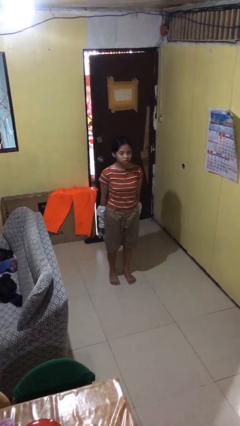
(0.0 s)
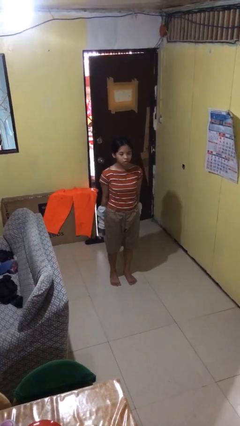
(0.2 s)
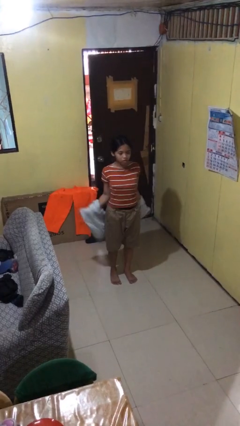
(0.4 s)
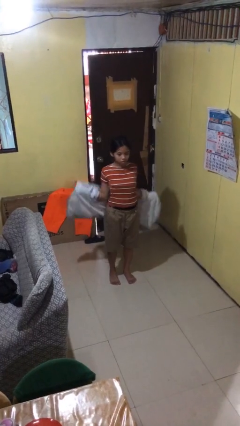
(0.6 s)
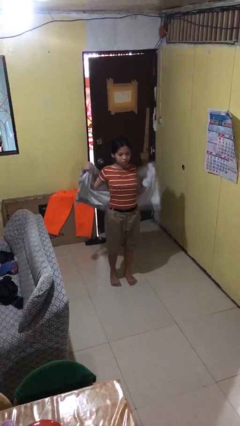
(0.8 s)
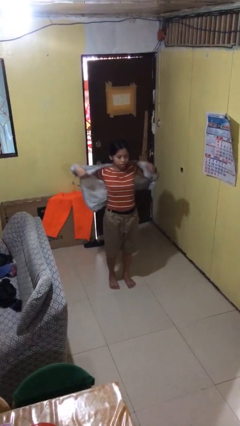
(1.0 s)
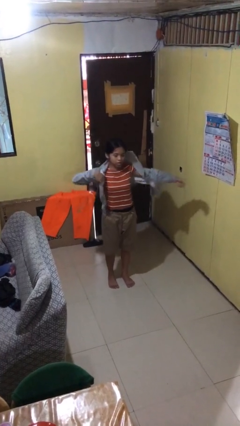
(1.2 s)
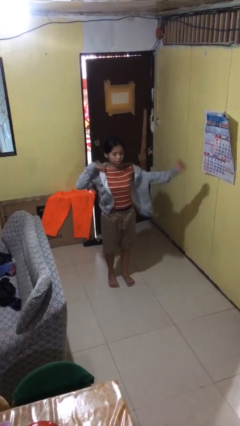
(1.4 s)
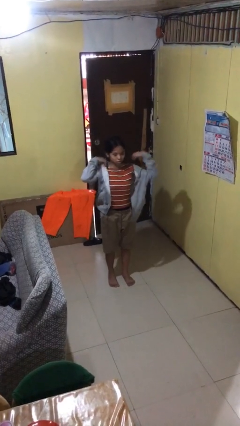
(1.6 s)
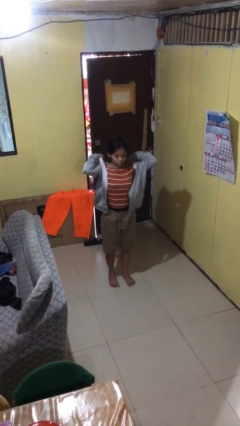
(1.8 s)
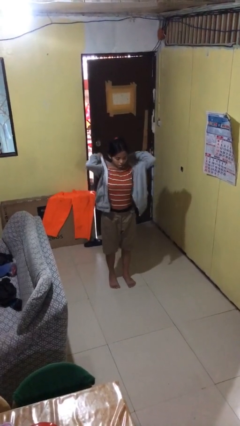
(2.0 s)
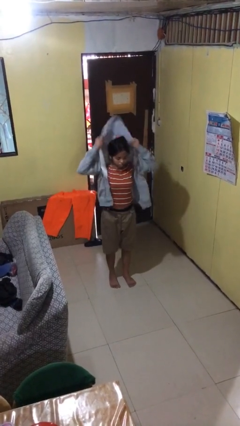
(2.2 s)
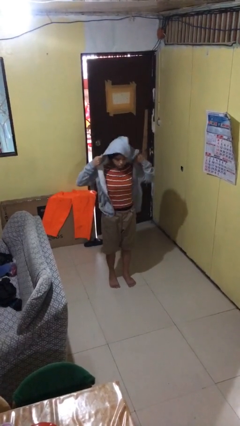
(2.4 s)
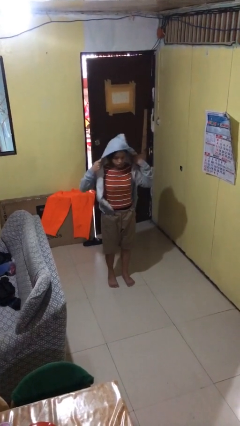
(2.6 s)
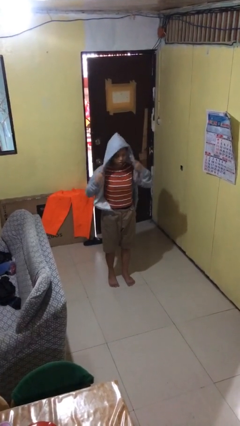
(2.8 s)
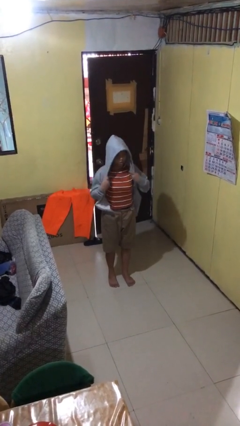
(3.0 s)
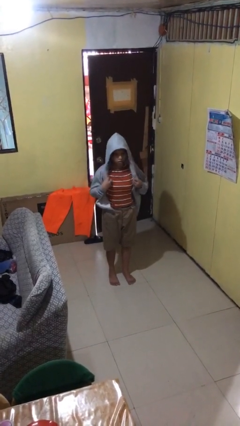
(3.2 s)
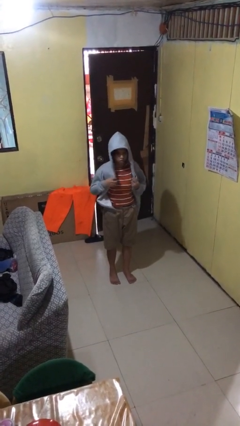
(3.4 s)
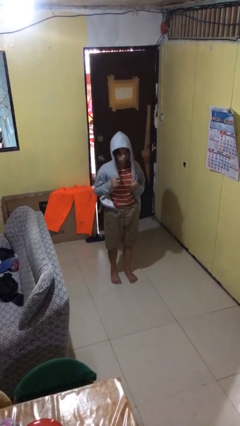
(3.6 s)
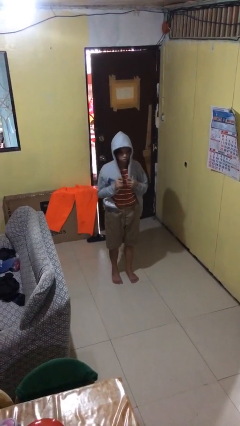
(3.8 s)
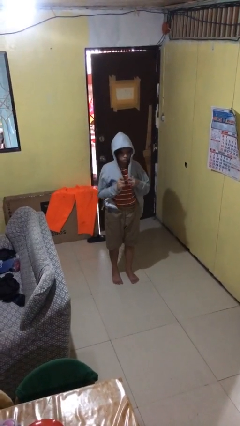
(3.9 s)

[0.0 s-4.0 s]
person puts on hoodie

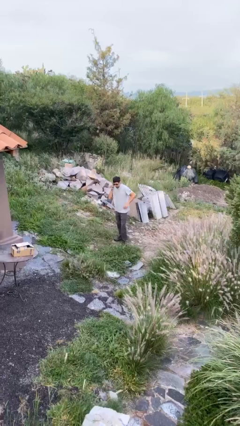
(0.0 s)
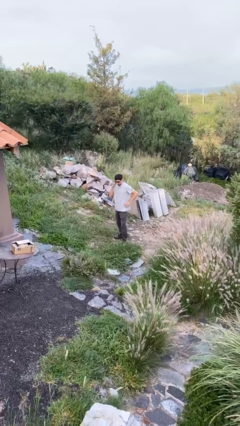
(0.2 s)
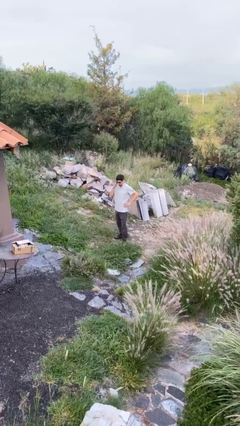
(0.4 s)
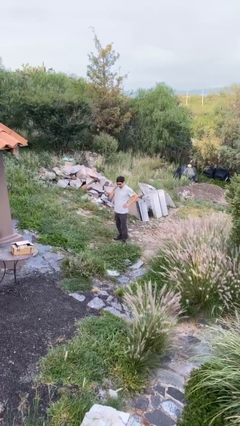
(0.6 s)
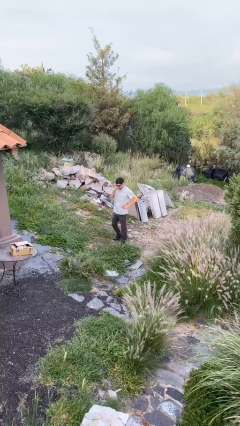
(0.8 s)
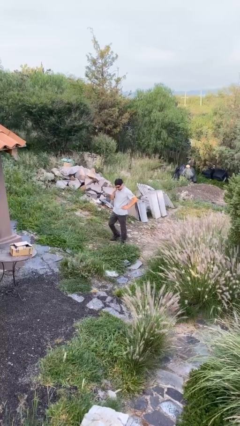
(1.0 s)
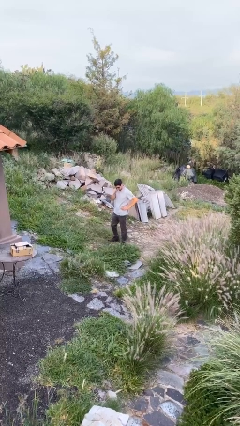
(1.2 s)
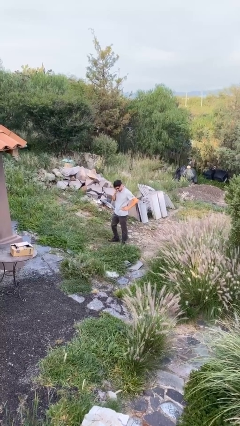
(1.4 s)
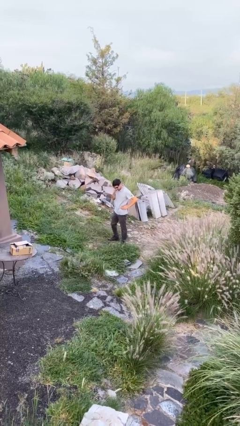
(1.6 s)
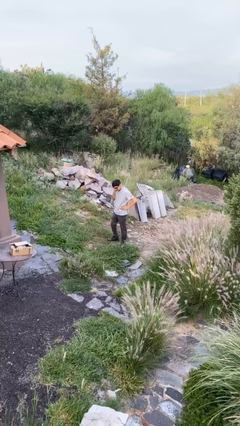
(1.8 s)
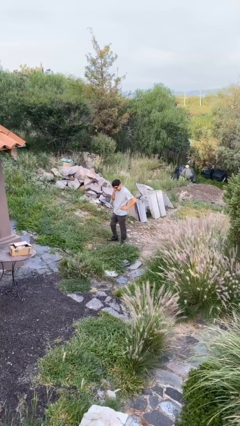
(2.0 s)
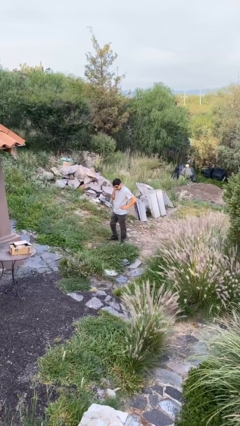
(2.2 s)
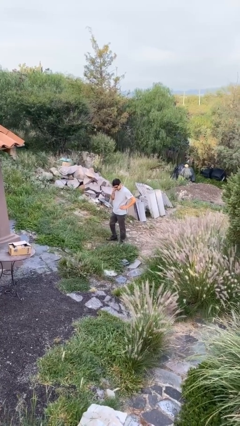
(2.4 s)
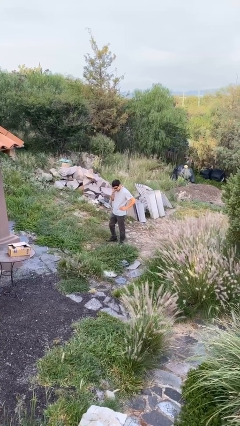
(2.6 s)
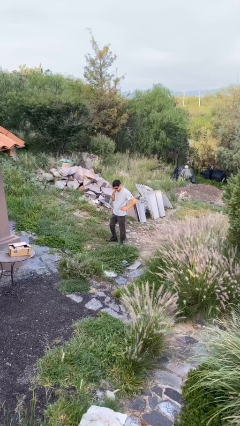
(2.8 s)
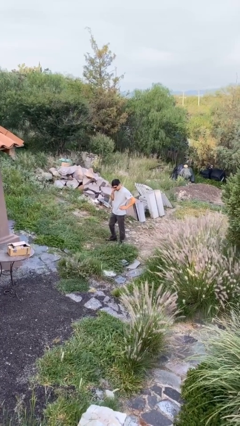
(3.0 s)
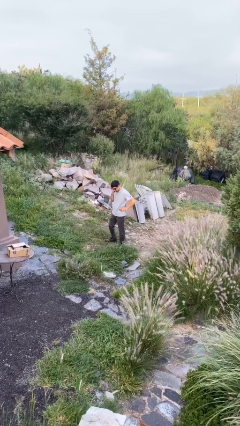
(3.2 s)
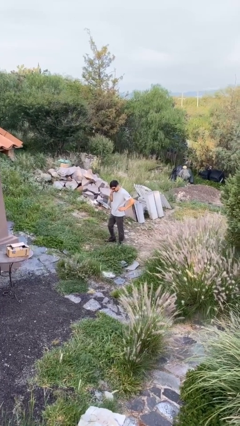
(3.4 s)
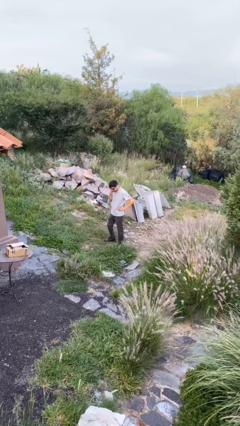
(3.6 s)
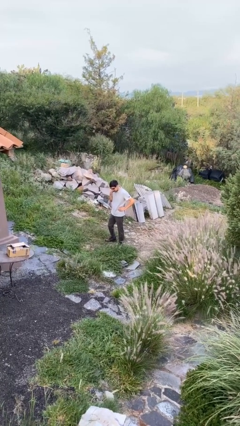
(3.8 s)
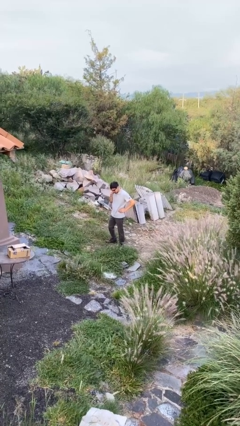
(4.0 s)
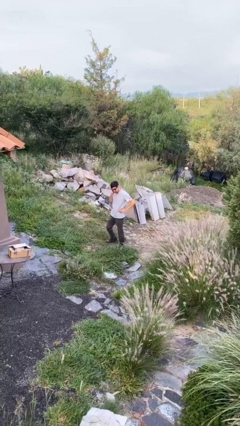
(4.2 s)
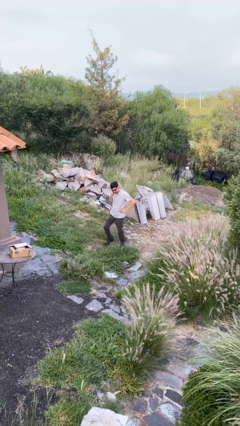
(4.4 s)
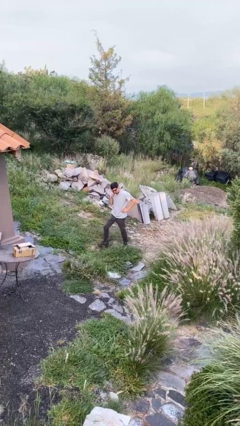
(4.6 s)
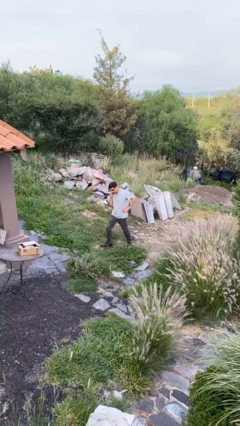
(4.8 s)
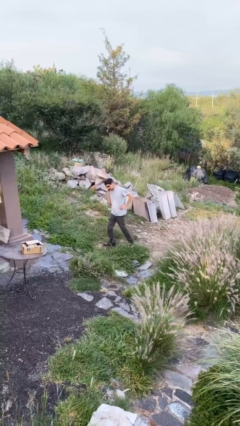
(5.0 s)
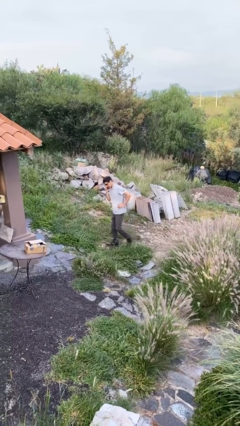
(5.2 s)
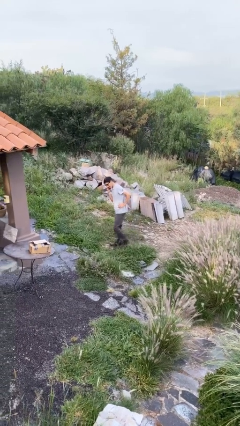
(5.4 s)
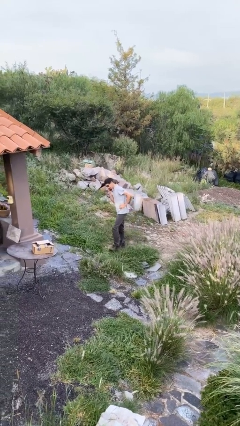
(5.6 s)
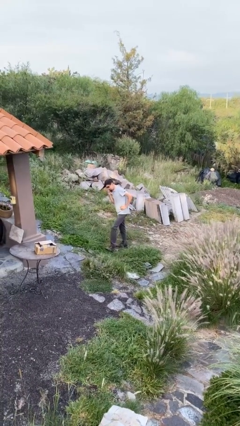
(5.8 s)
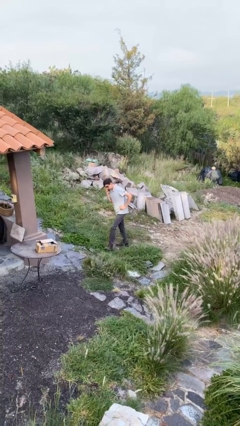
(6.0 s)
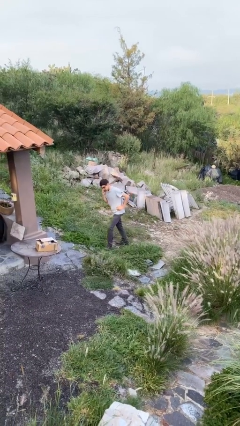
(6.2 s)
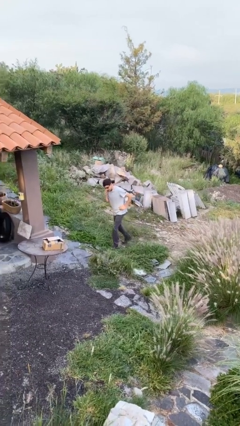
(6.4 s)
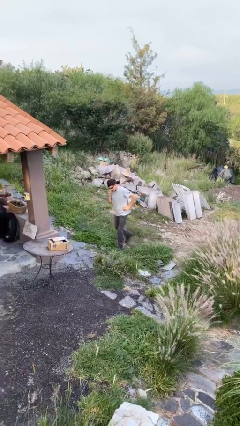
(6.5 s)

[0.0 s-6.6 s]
person talks on phone

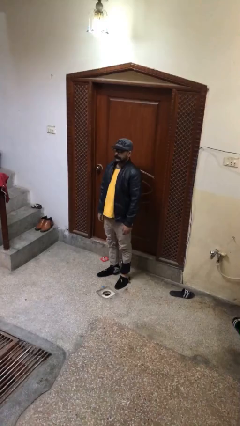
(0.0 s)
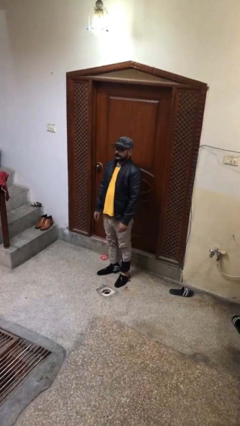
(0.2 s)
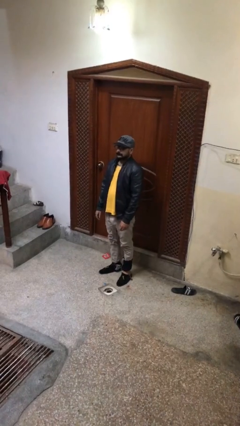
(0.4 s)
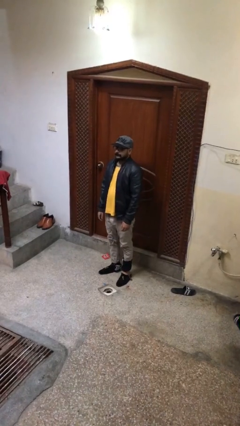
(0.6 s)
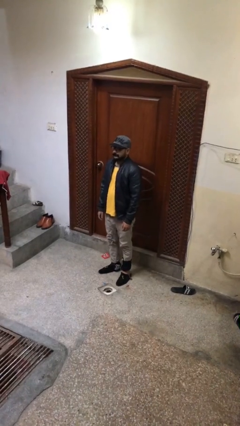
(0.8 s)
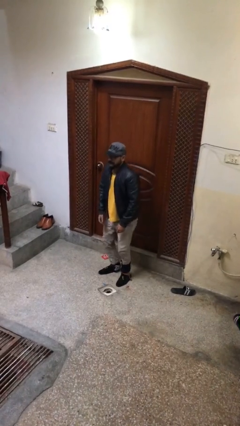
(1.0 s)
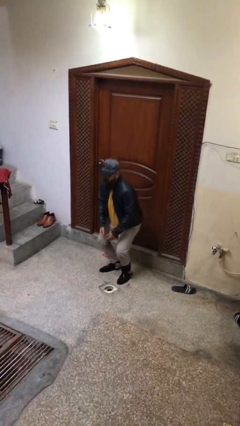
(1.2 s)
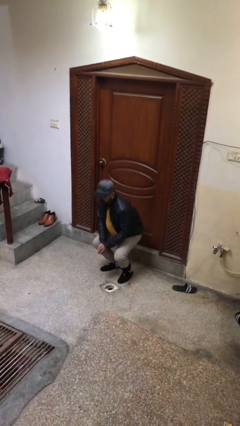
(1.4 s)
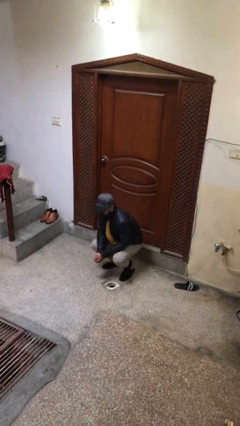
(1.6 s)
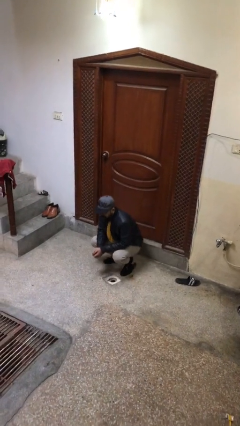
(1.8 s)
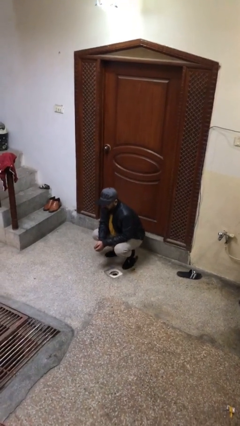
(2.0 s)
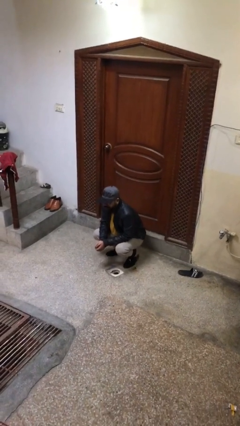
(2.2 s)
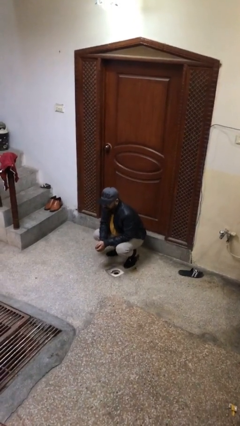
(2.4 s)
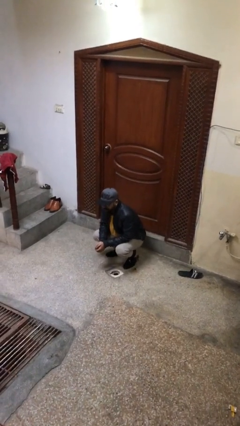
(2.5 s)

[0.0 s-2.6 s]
person sits down

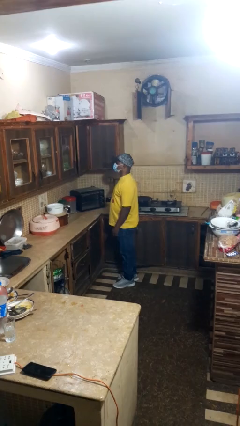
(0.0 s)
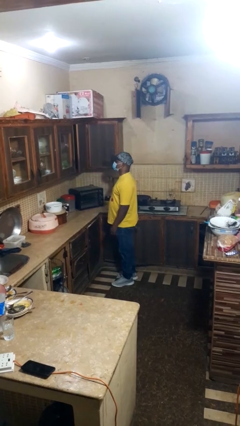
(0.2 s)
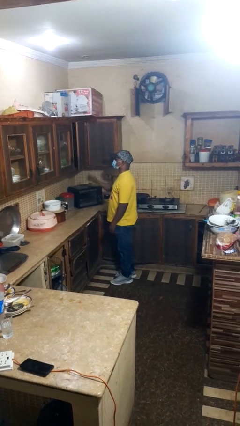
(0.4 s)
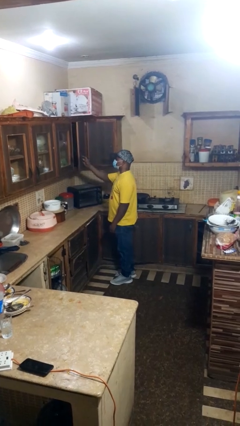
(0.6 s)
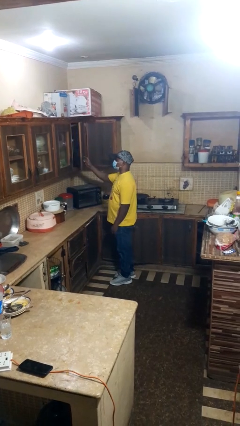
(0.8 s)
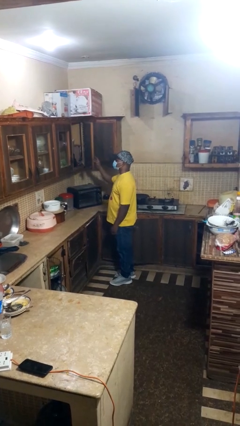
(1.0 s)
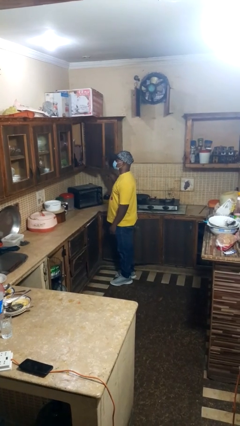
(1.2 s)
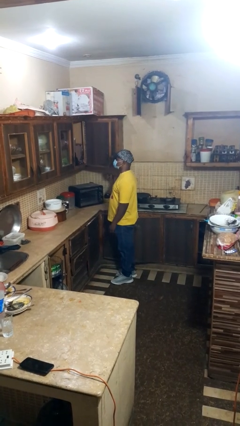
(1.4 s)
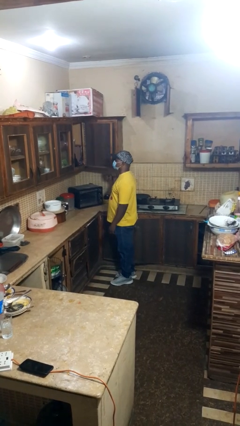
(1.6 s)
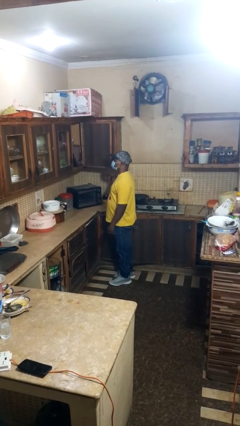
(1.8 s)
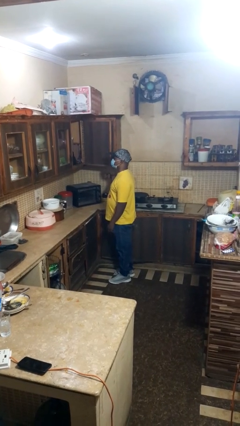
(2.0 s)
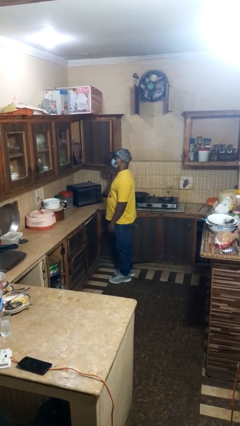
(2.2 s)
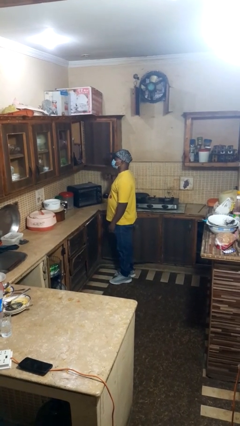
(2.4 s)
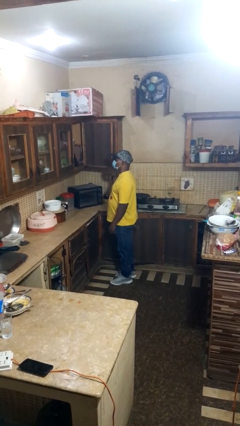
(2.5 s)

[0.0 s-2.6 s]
person opens cabinet

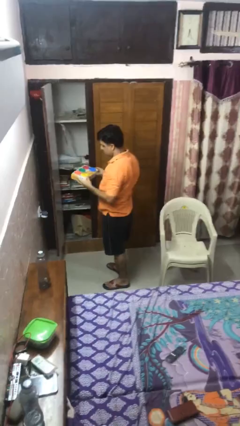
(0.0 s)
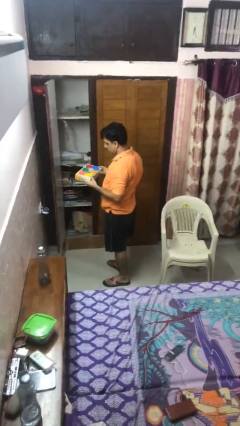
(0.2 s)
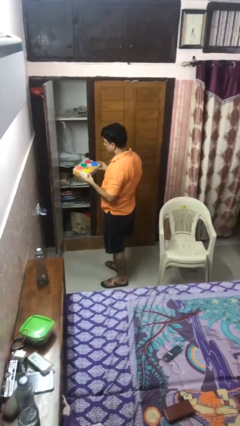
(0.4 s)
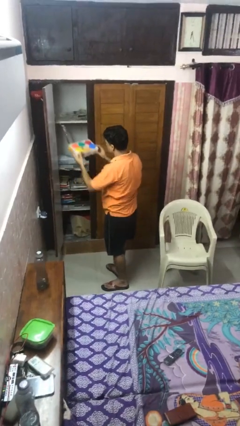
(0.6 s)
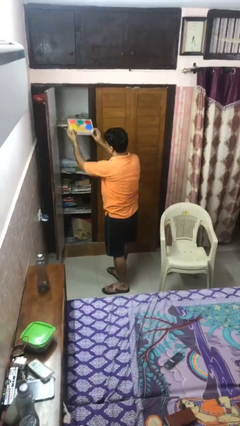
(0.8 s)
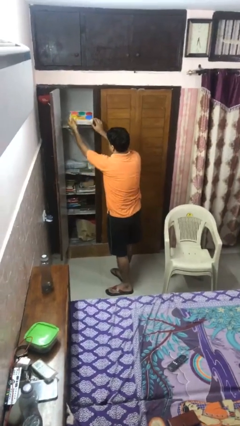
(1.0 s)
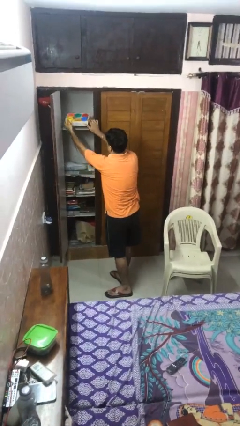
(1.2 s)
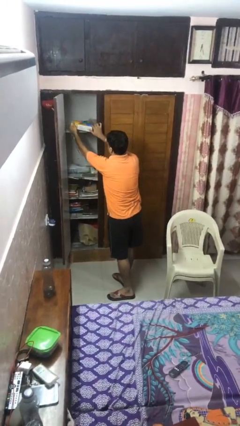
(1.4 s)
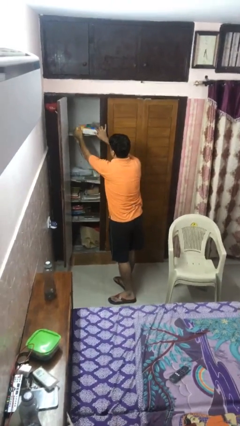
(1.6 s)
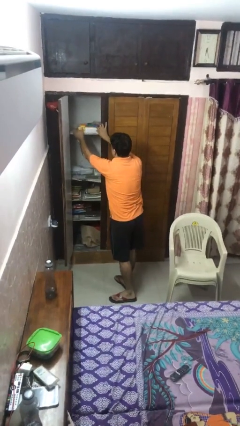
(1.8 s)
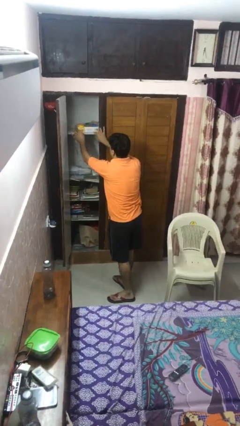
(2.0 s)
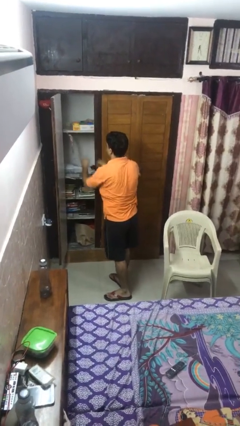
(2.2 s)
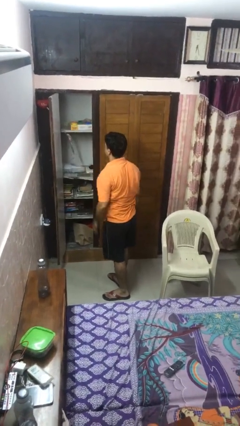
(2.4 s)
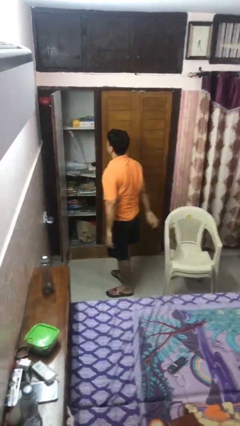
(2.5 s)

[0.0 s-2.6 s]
person puts down object on shelf
